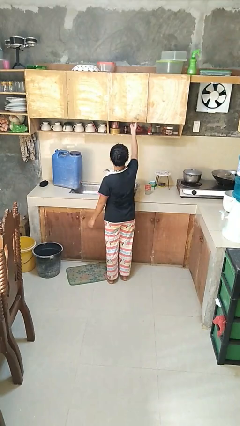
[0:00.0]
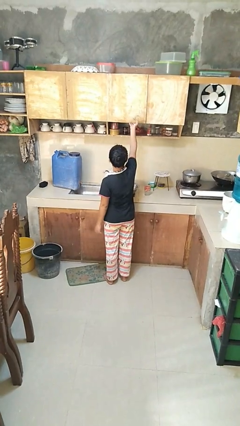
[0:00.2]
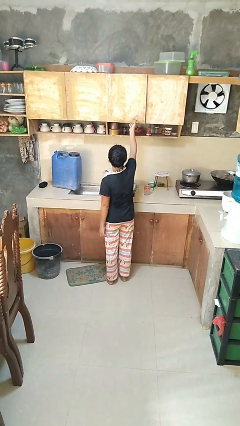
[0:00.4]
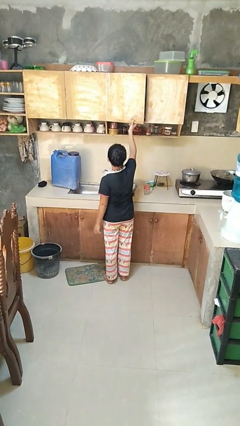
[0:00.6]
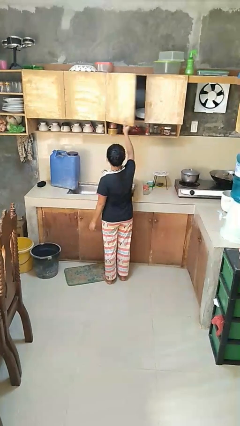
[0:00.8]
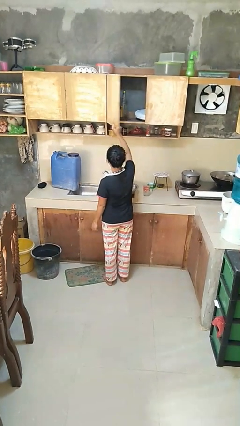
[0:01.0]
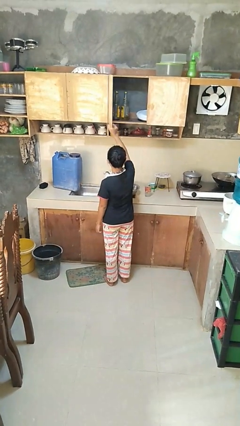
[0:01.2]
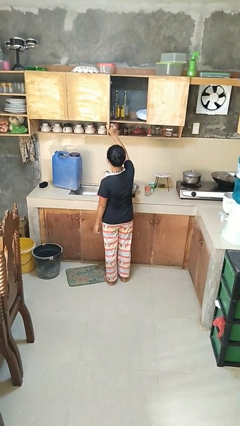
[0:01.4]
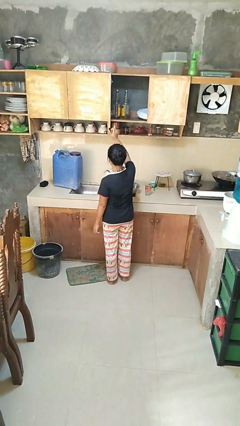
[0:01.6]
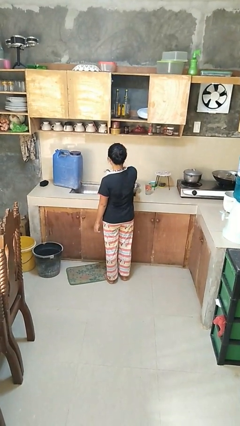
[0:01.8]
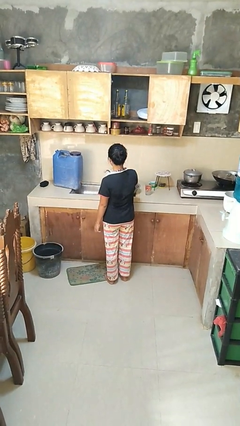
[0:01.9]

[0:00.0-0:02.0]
person opens cabinet

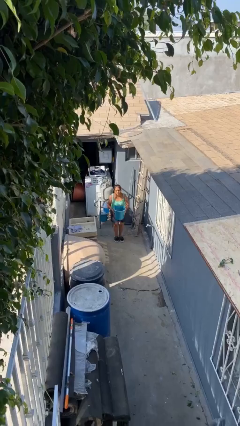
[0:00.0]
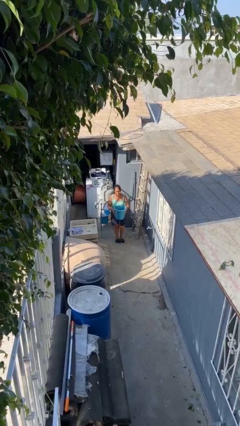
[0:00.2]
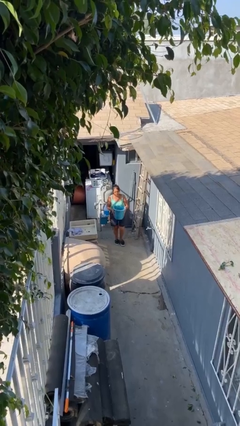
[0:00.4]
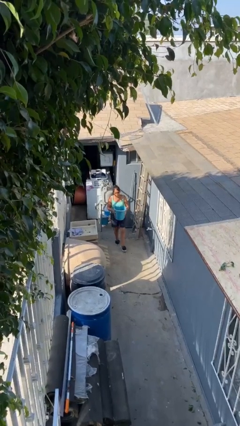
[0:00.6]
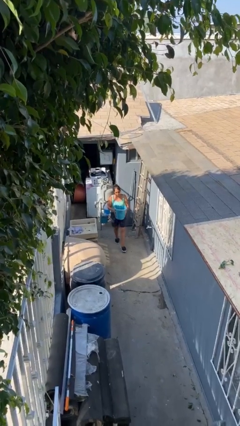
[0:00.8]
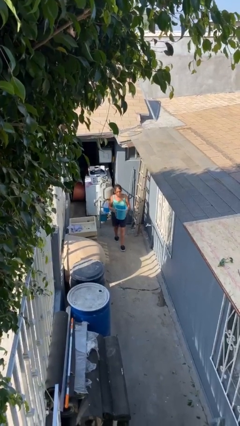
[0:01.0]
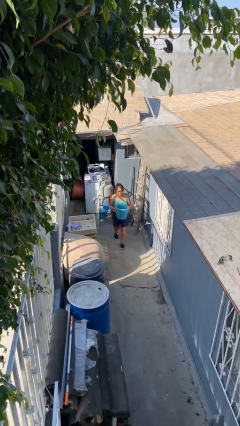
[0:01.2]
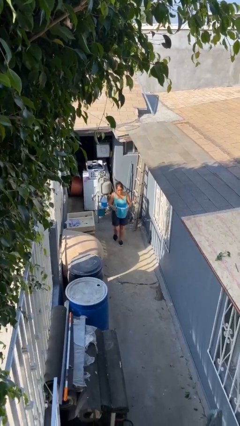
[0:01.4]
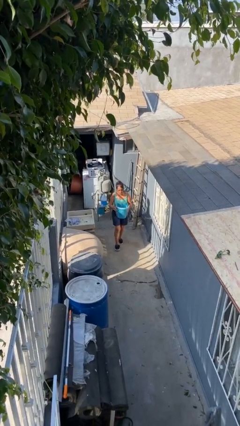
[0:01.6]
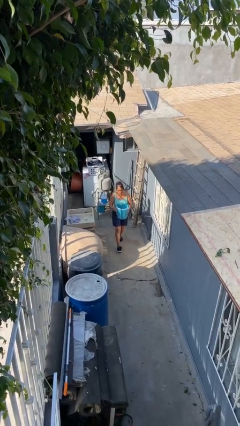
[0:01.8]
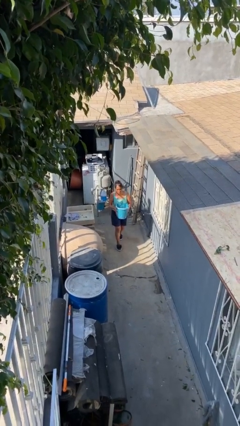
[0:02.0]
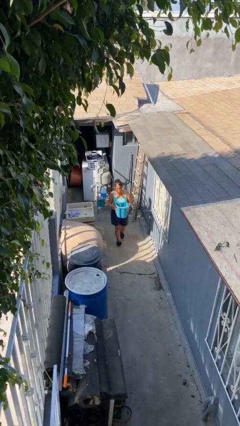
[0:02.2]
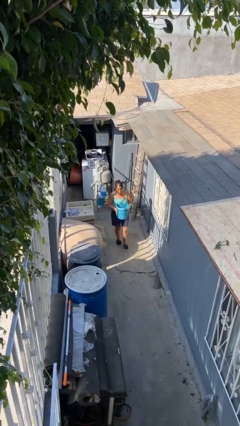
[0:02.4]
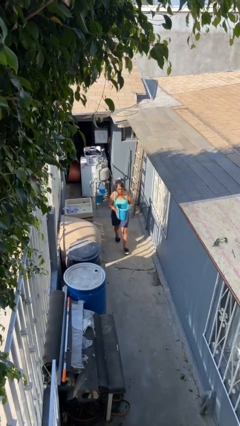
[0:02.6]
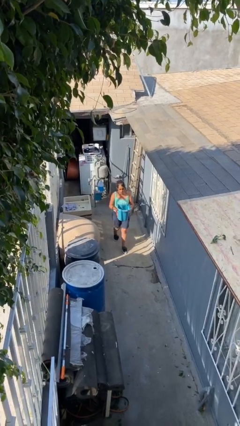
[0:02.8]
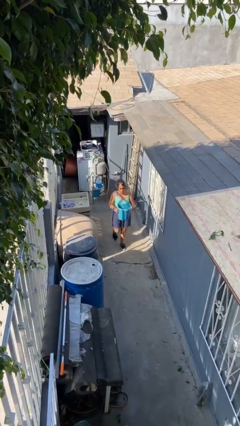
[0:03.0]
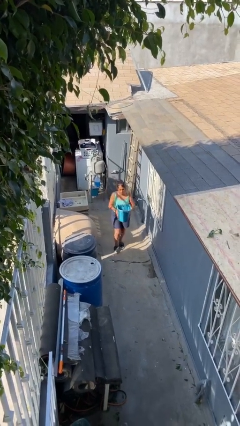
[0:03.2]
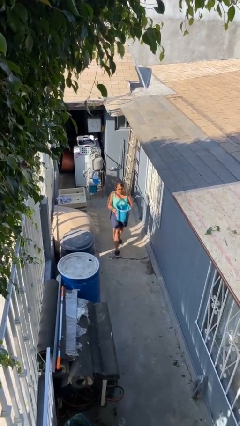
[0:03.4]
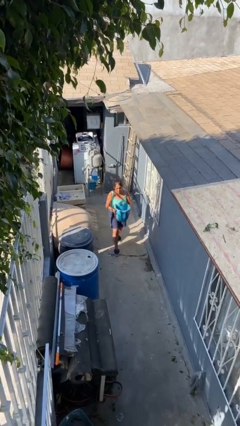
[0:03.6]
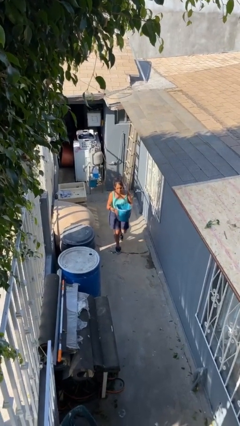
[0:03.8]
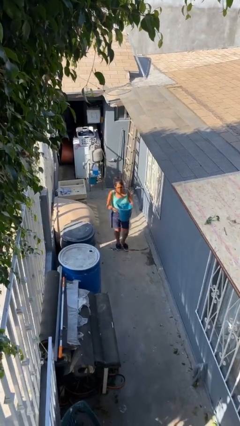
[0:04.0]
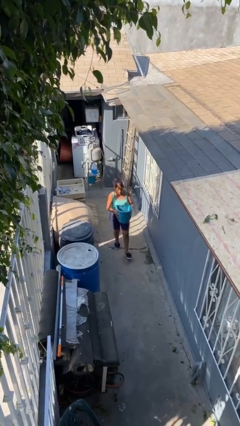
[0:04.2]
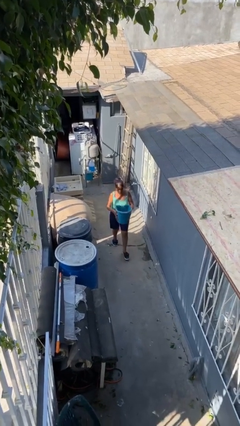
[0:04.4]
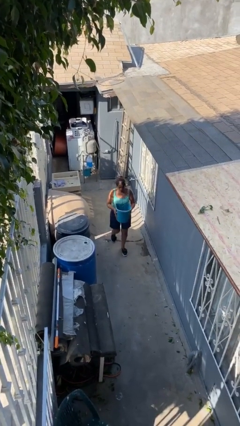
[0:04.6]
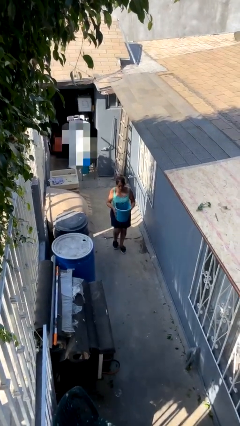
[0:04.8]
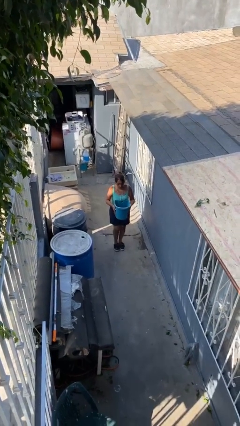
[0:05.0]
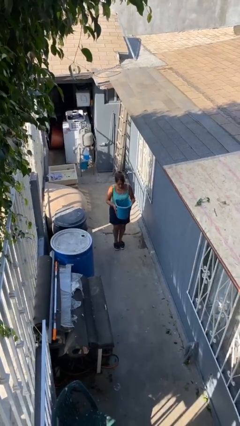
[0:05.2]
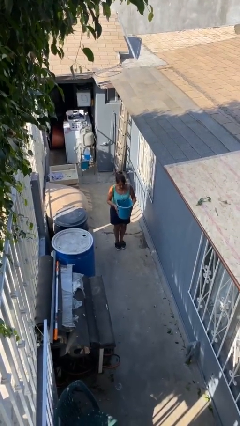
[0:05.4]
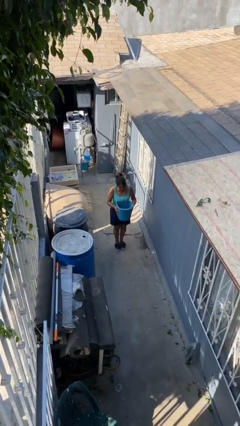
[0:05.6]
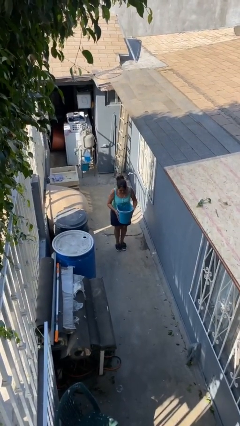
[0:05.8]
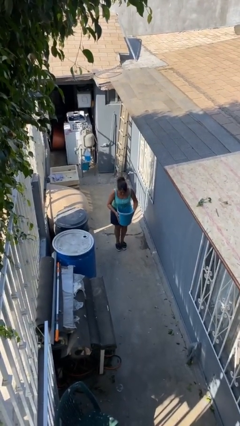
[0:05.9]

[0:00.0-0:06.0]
person carries heavy object

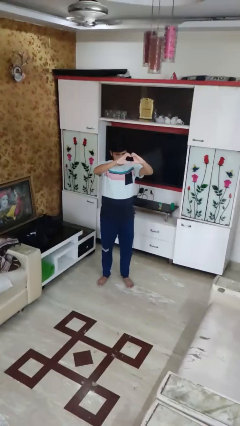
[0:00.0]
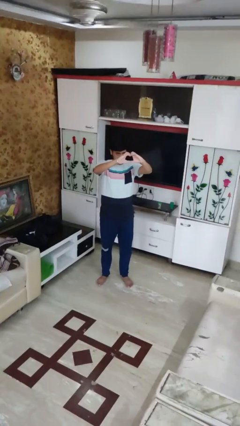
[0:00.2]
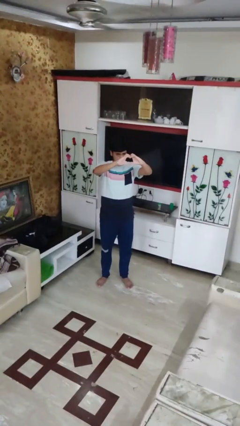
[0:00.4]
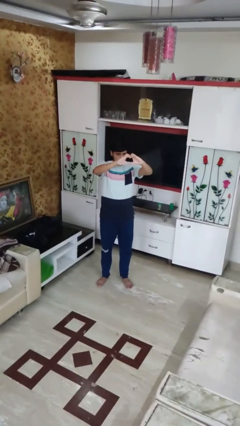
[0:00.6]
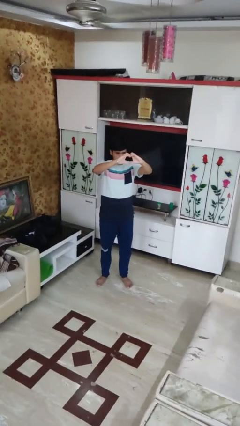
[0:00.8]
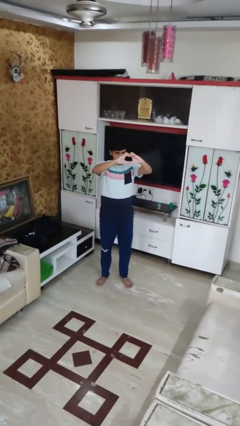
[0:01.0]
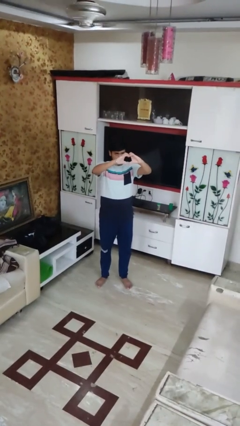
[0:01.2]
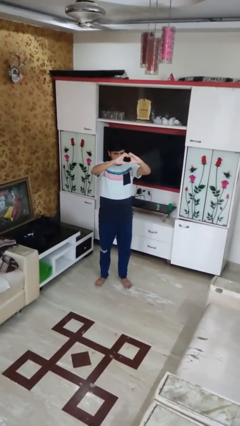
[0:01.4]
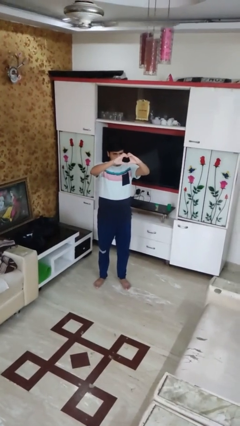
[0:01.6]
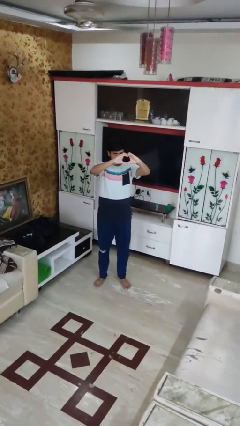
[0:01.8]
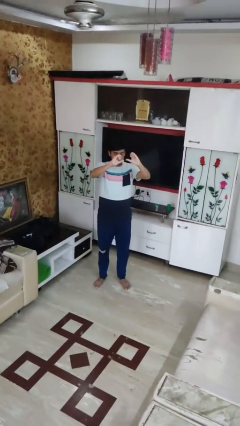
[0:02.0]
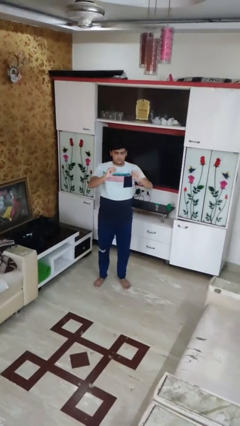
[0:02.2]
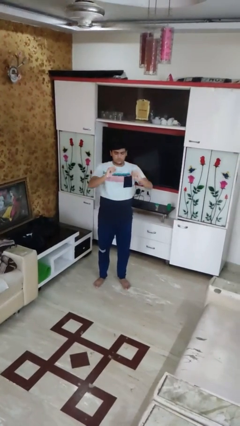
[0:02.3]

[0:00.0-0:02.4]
person gestures heart

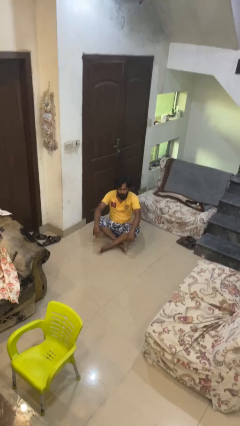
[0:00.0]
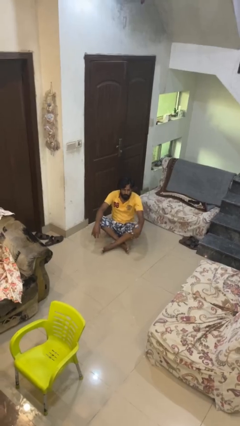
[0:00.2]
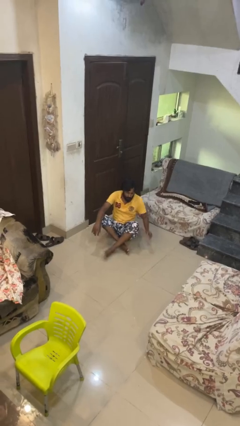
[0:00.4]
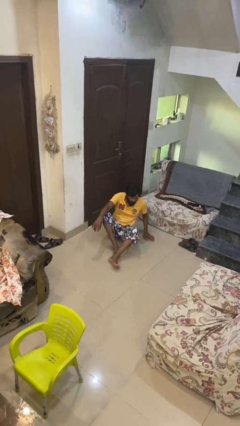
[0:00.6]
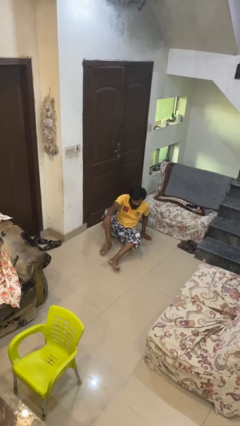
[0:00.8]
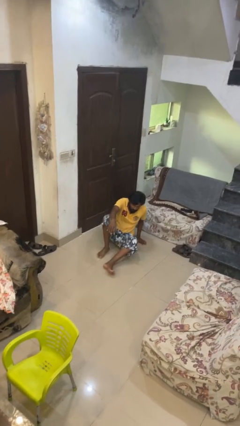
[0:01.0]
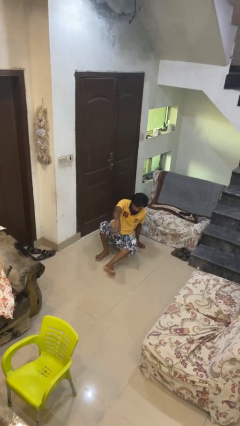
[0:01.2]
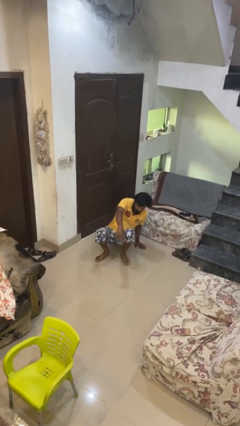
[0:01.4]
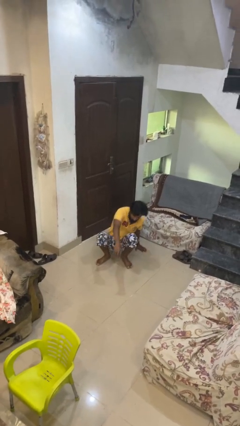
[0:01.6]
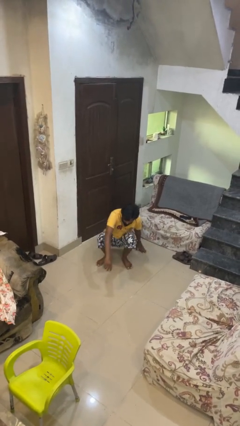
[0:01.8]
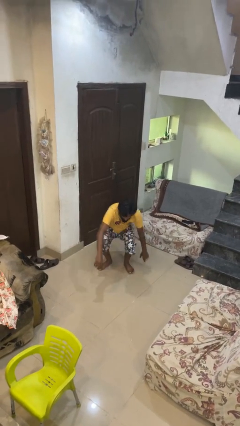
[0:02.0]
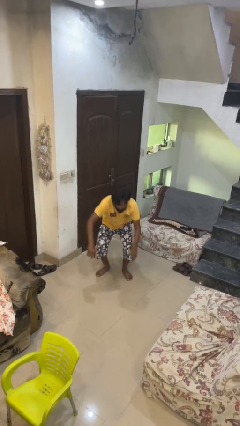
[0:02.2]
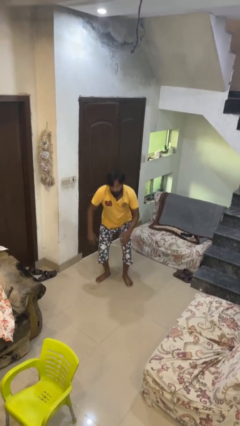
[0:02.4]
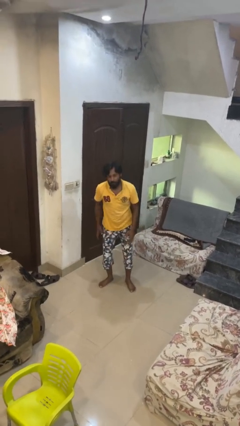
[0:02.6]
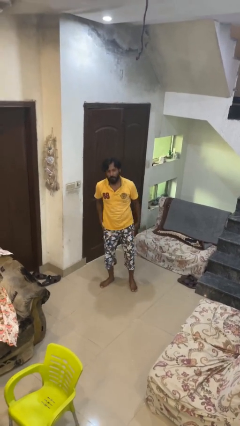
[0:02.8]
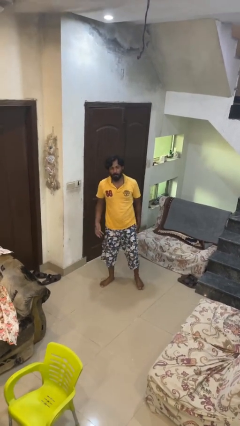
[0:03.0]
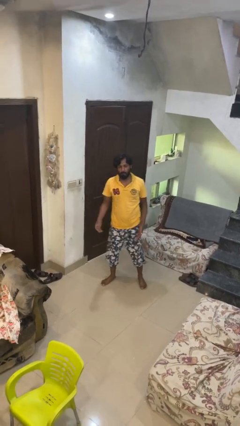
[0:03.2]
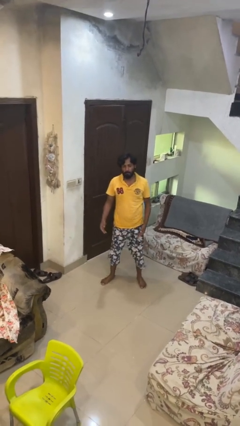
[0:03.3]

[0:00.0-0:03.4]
person stands up from floor

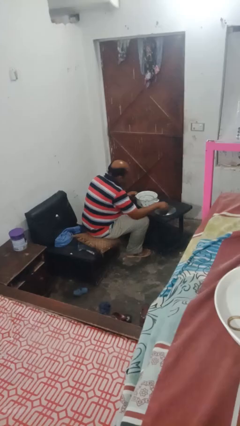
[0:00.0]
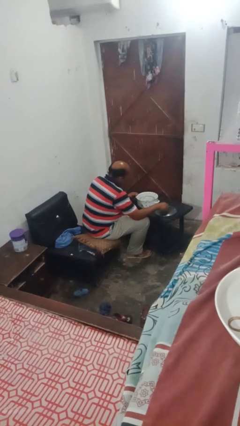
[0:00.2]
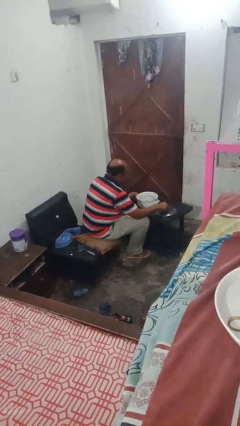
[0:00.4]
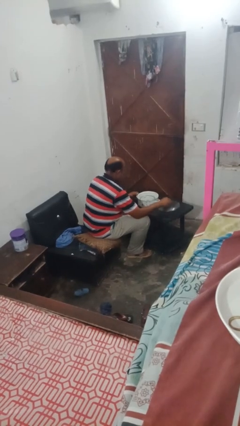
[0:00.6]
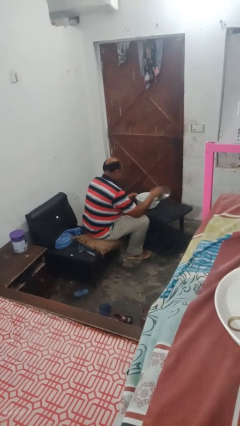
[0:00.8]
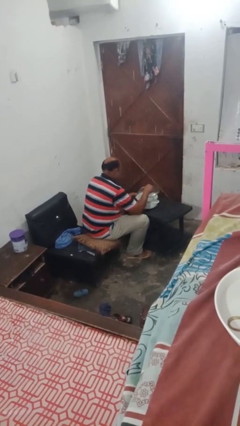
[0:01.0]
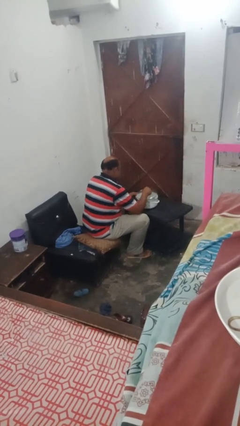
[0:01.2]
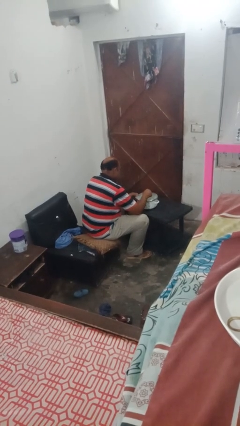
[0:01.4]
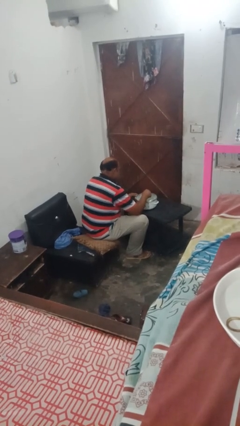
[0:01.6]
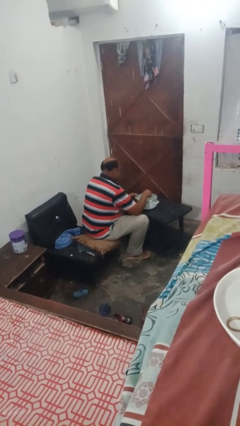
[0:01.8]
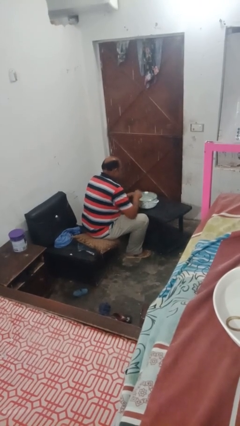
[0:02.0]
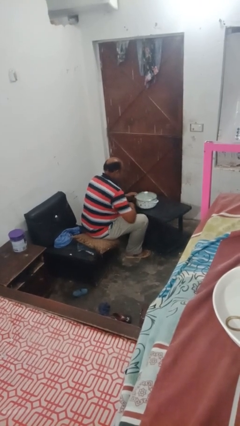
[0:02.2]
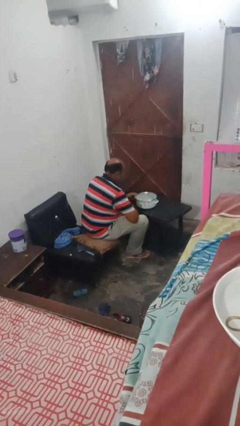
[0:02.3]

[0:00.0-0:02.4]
person closes jar

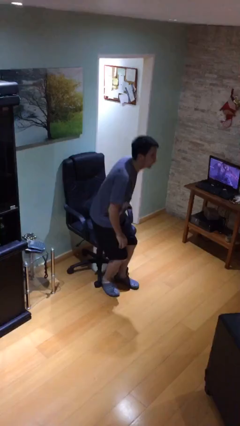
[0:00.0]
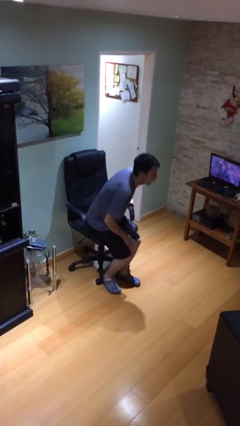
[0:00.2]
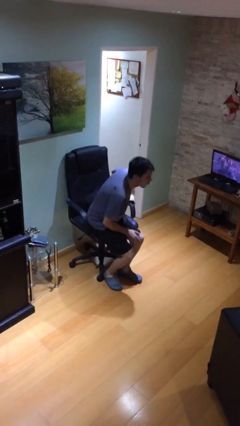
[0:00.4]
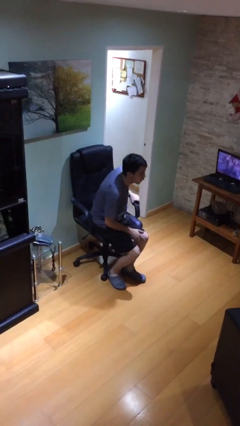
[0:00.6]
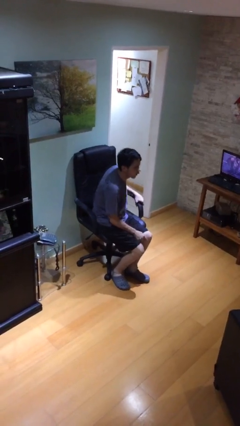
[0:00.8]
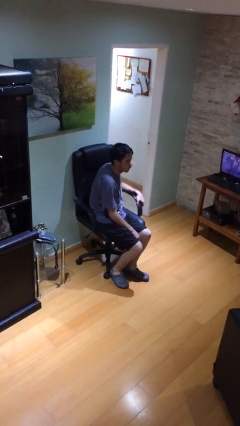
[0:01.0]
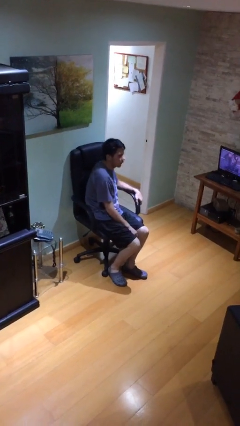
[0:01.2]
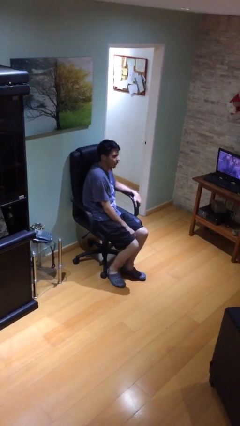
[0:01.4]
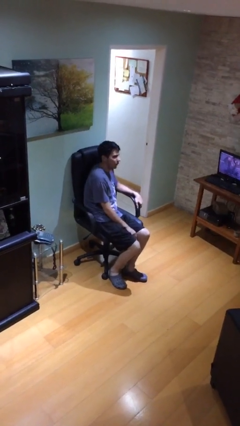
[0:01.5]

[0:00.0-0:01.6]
person sits down
